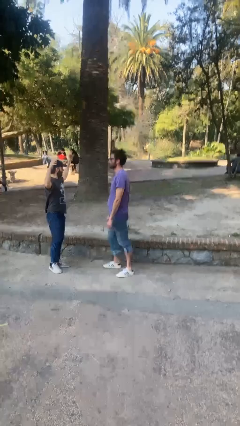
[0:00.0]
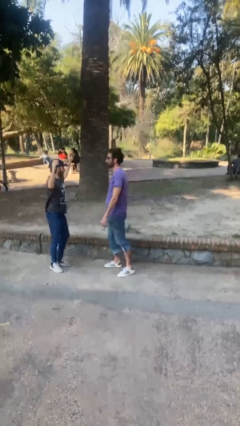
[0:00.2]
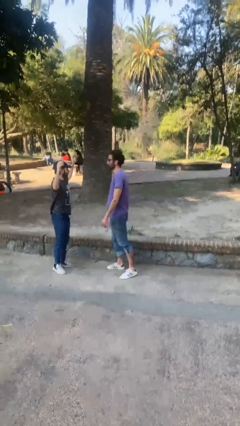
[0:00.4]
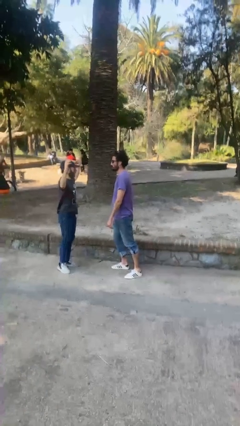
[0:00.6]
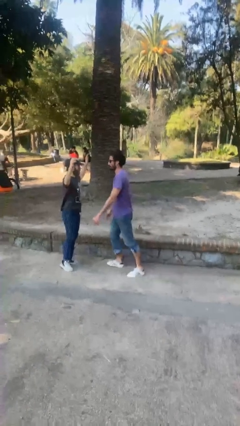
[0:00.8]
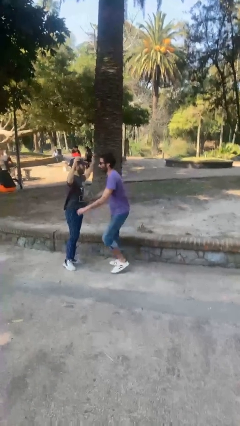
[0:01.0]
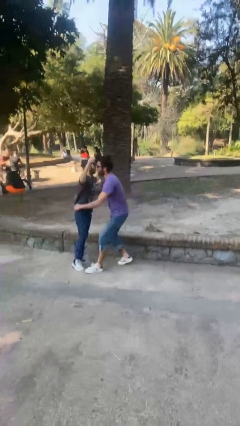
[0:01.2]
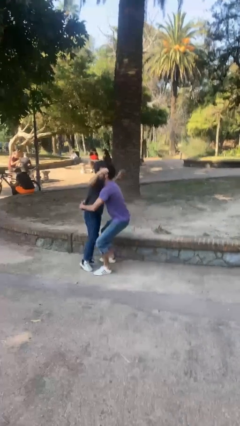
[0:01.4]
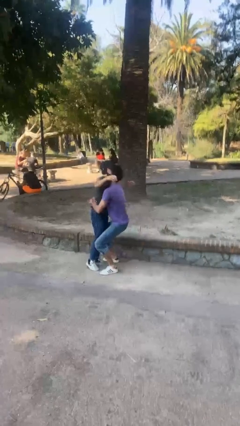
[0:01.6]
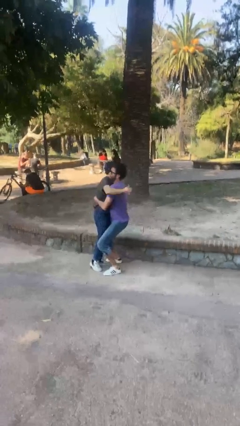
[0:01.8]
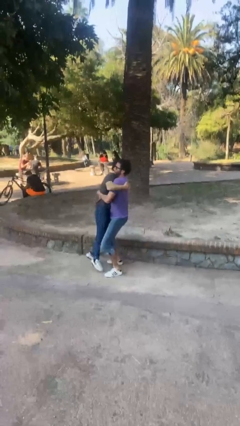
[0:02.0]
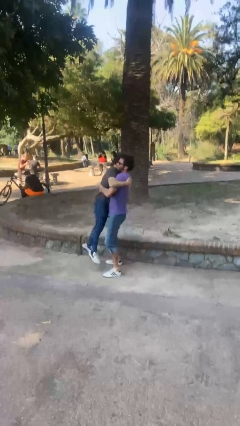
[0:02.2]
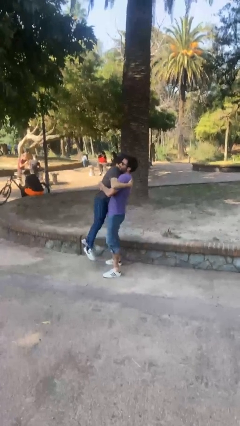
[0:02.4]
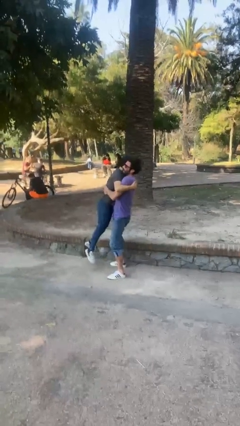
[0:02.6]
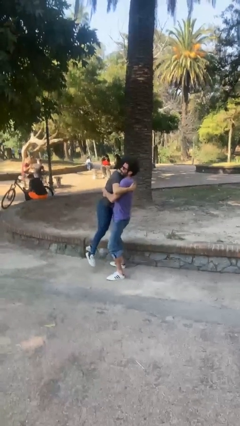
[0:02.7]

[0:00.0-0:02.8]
person picks up person

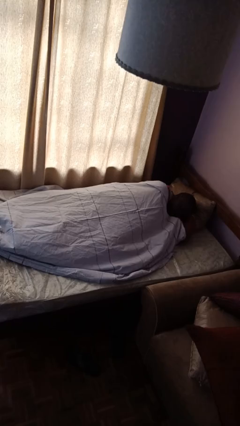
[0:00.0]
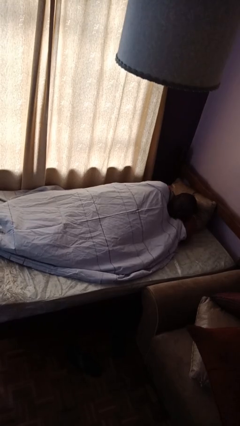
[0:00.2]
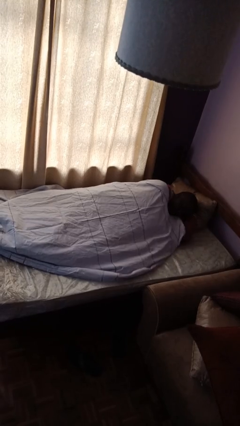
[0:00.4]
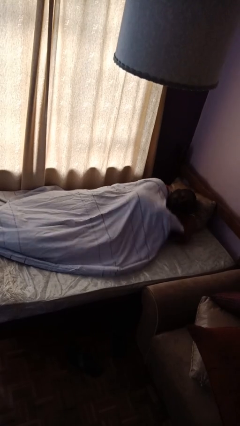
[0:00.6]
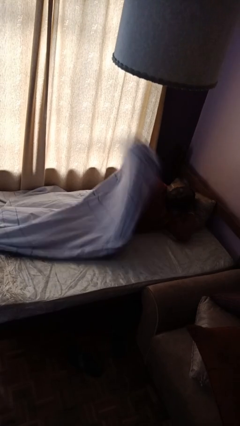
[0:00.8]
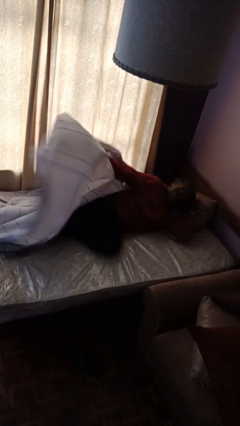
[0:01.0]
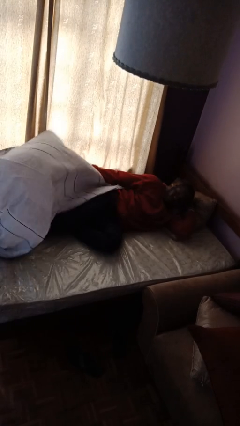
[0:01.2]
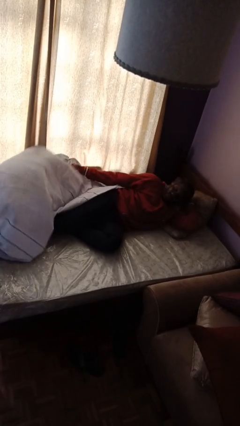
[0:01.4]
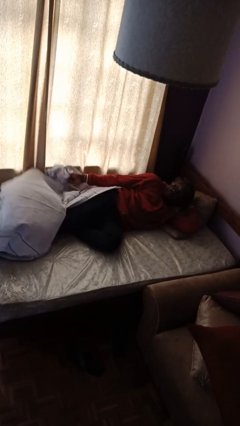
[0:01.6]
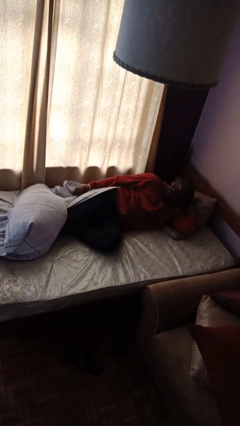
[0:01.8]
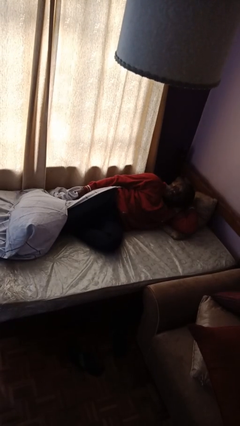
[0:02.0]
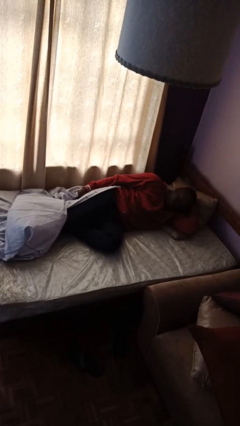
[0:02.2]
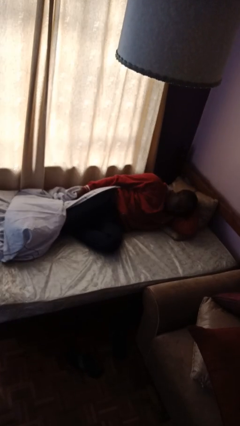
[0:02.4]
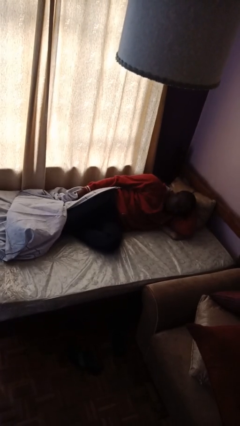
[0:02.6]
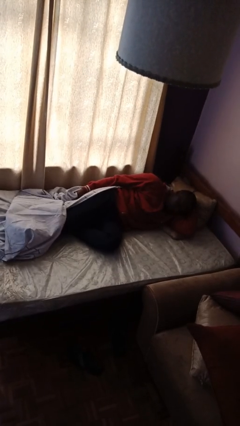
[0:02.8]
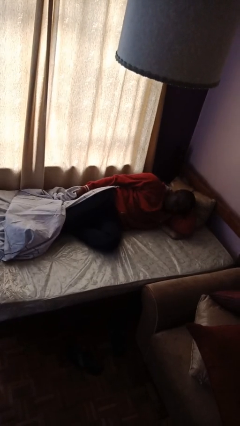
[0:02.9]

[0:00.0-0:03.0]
person uncovers with bedsheets

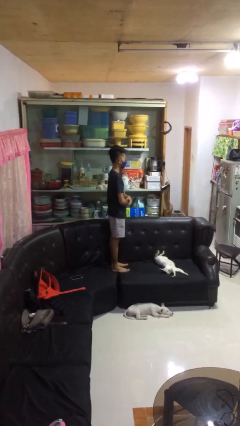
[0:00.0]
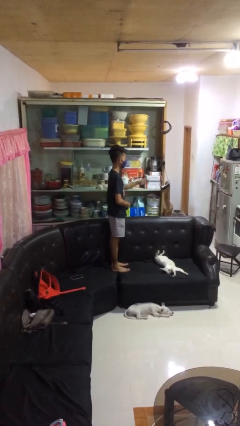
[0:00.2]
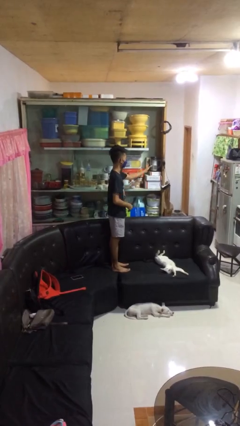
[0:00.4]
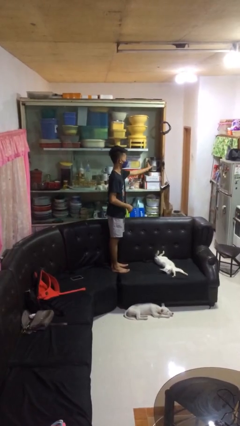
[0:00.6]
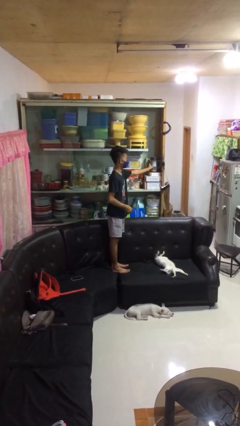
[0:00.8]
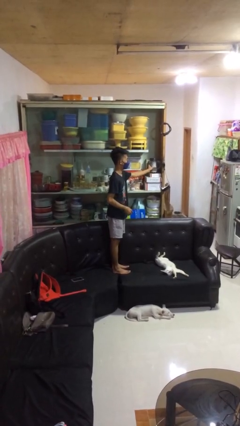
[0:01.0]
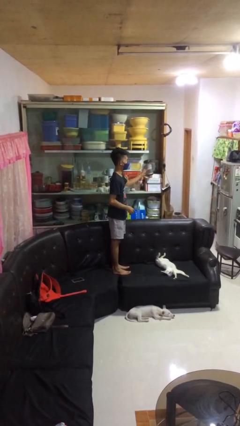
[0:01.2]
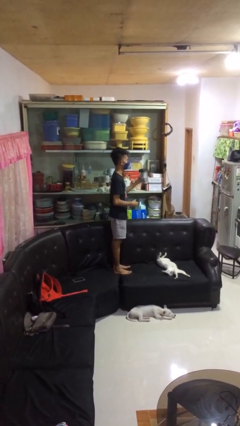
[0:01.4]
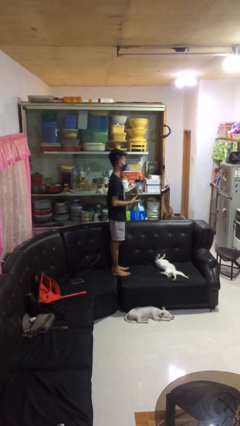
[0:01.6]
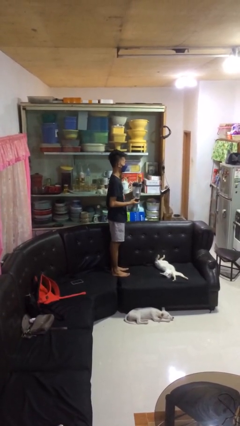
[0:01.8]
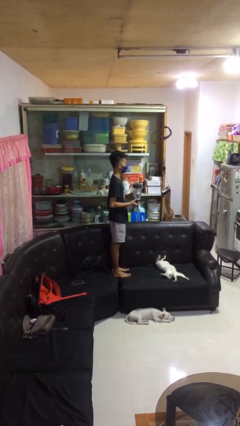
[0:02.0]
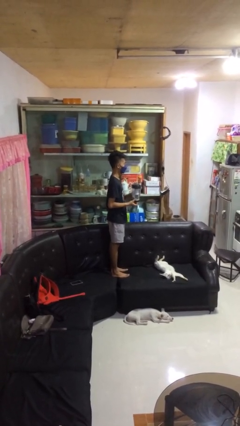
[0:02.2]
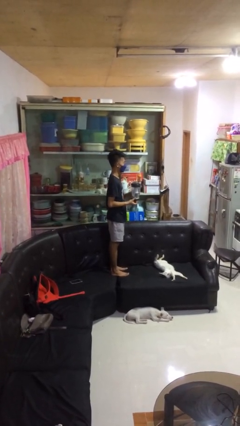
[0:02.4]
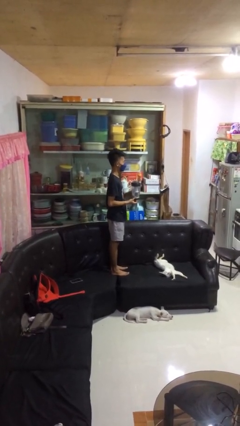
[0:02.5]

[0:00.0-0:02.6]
person picks up object from cabinet

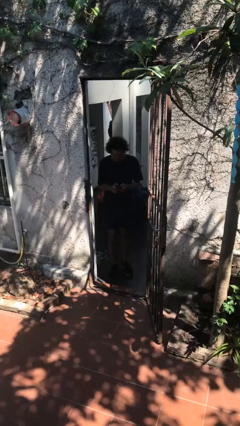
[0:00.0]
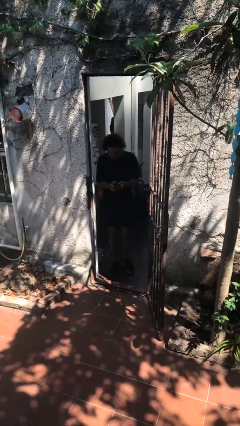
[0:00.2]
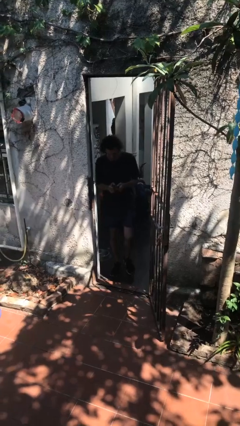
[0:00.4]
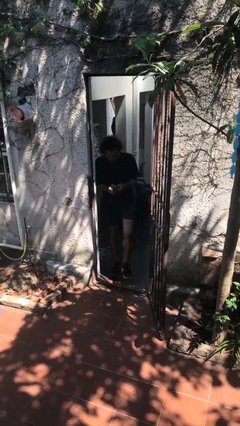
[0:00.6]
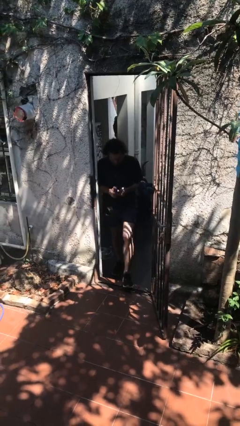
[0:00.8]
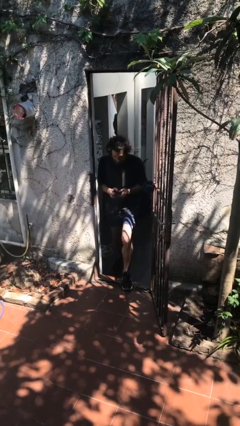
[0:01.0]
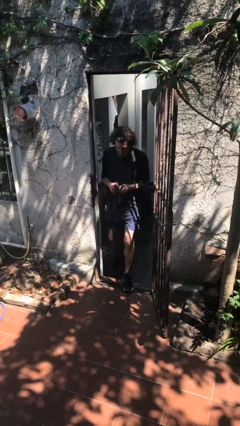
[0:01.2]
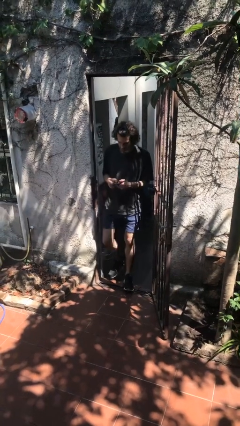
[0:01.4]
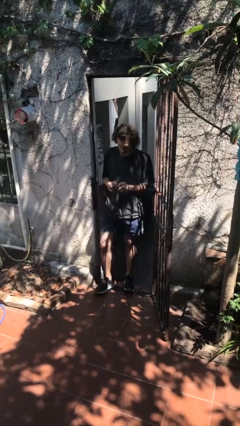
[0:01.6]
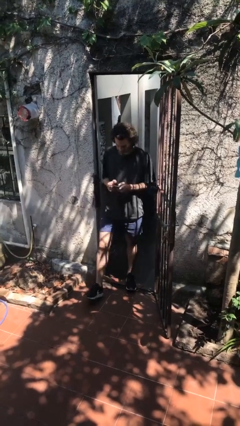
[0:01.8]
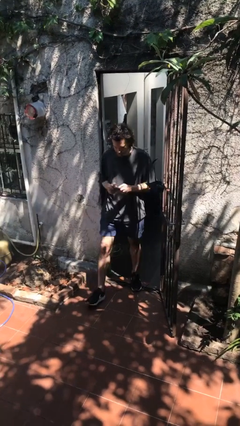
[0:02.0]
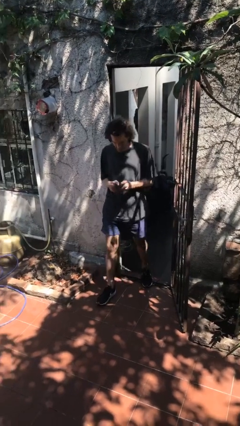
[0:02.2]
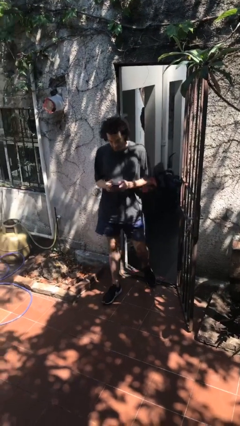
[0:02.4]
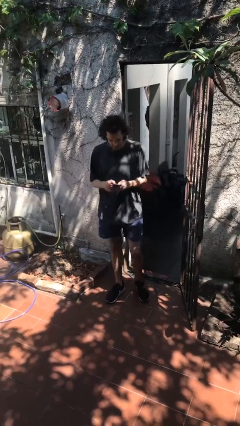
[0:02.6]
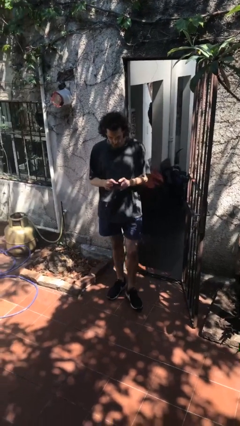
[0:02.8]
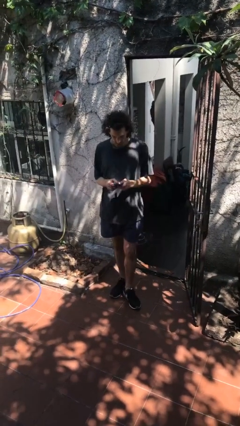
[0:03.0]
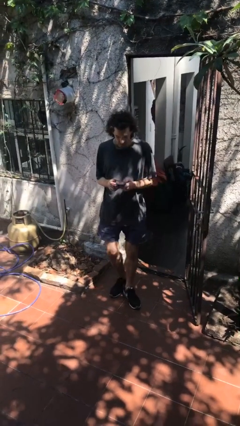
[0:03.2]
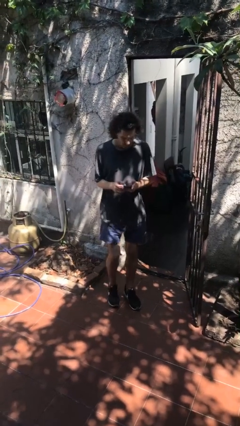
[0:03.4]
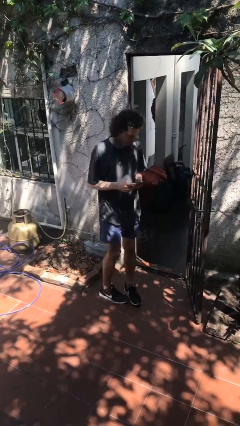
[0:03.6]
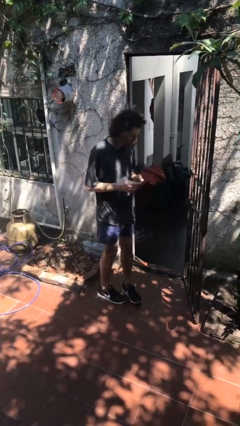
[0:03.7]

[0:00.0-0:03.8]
person enters scene through structure

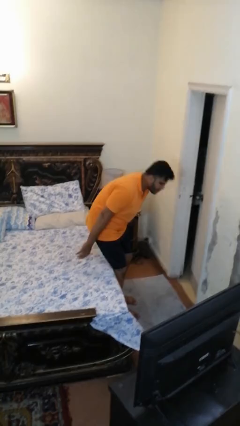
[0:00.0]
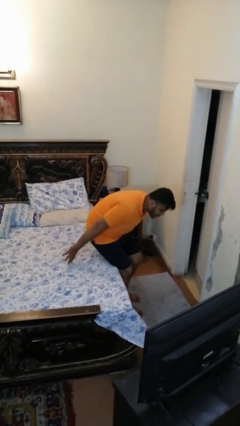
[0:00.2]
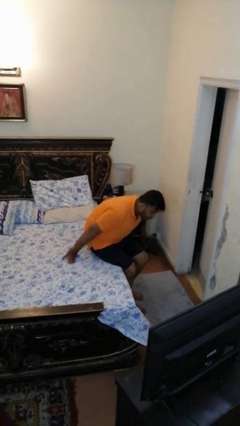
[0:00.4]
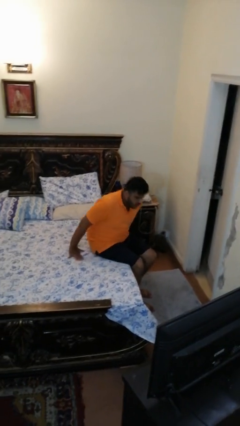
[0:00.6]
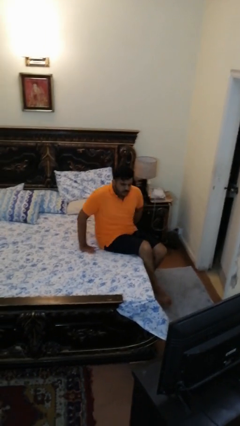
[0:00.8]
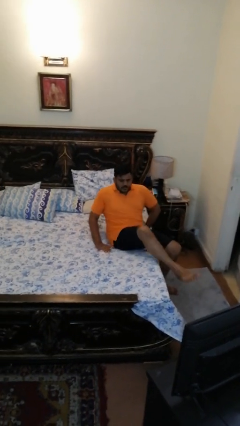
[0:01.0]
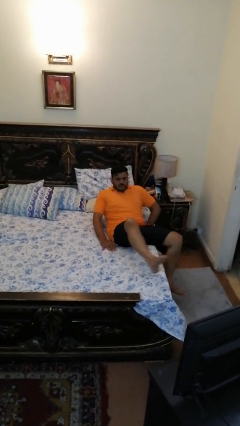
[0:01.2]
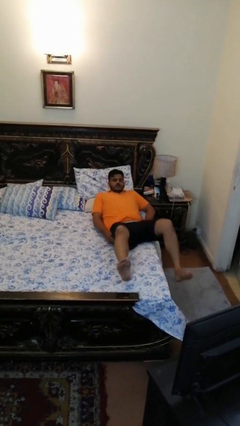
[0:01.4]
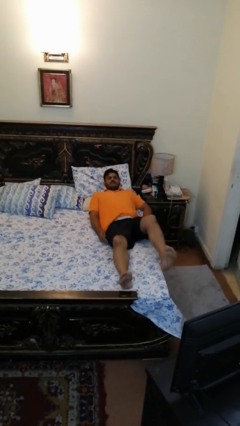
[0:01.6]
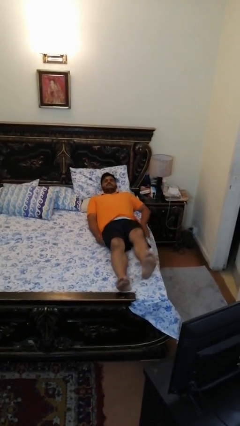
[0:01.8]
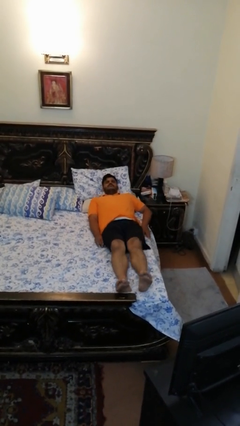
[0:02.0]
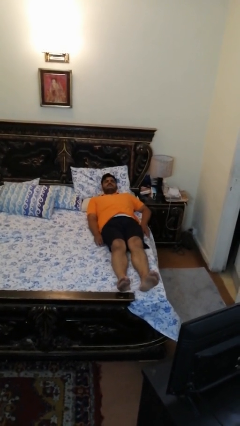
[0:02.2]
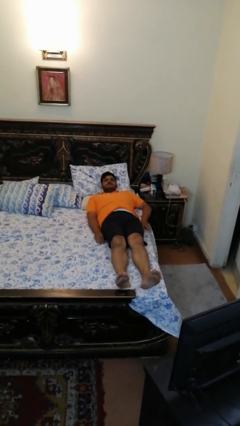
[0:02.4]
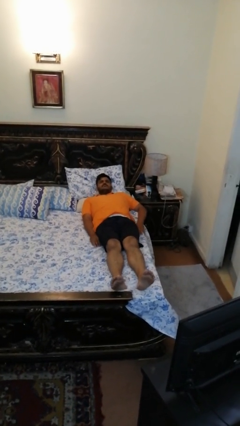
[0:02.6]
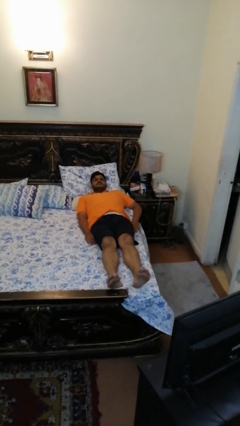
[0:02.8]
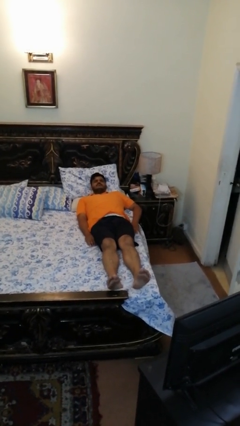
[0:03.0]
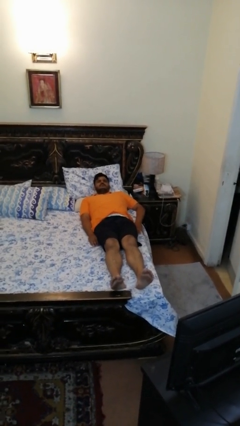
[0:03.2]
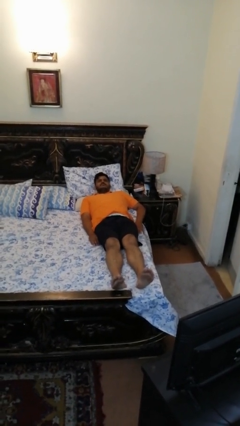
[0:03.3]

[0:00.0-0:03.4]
person lies down on bed

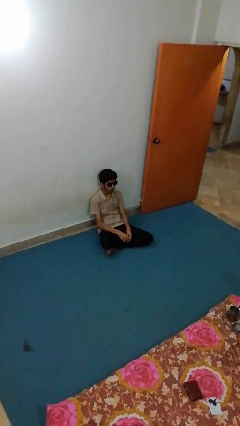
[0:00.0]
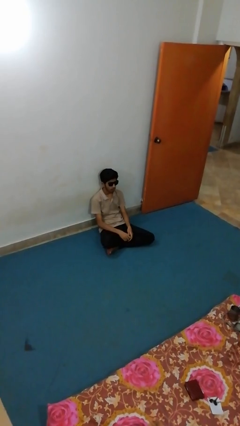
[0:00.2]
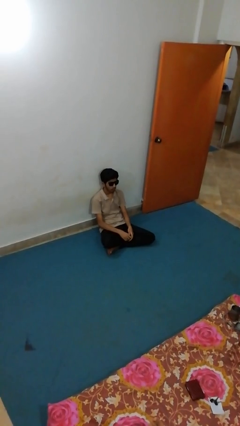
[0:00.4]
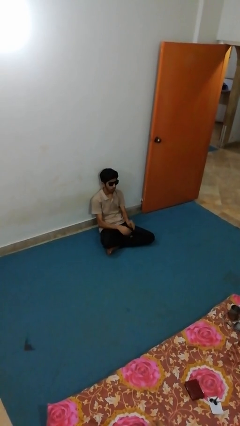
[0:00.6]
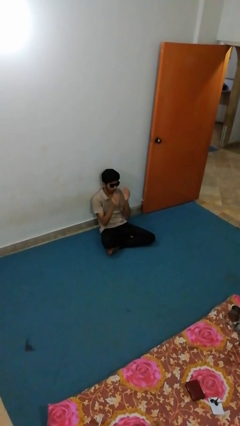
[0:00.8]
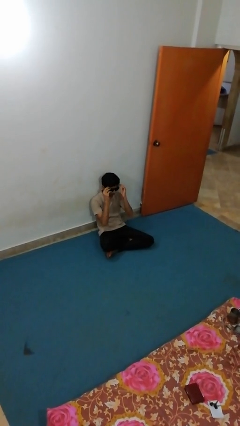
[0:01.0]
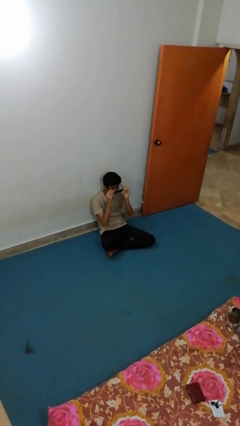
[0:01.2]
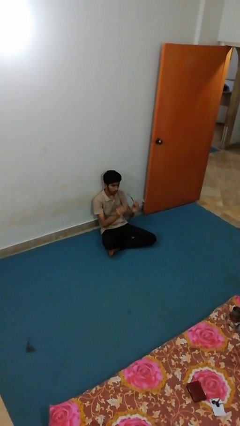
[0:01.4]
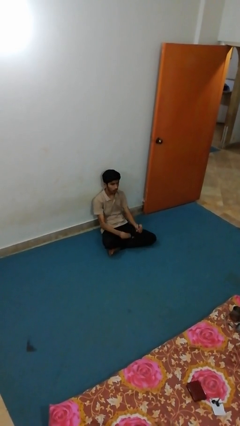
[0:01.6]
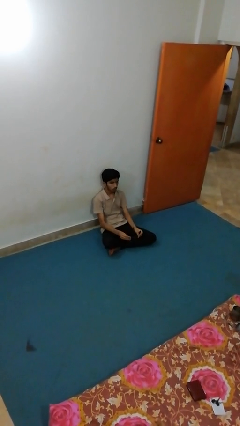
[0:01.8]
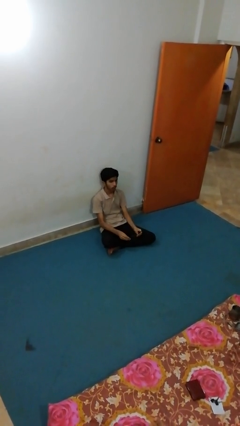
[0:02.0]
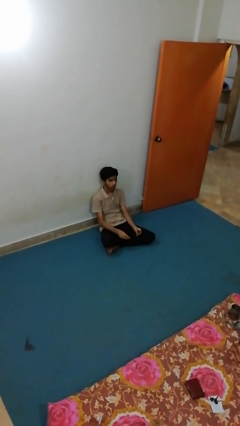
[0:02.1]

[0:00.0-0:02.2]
person takes off sunglasses
